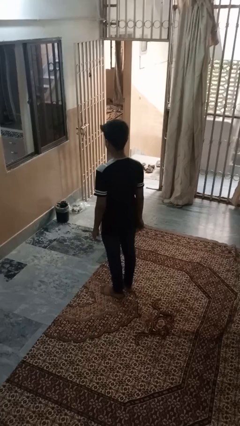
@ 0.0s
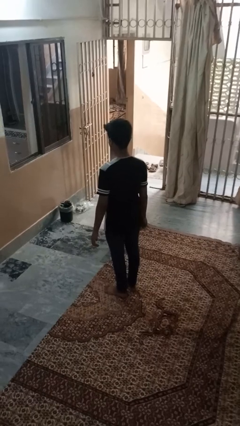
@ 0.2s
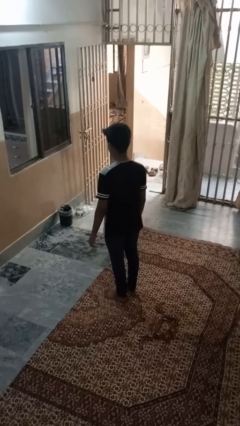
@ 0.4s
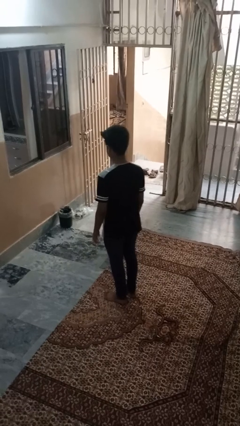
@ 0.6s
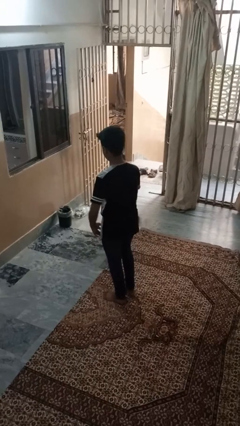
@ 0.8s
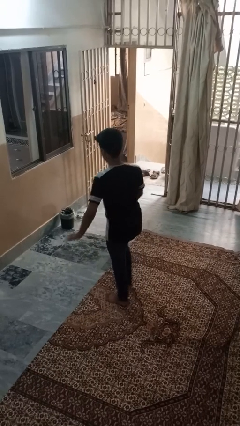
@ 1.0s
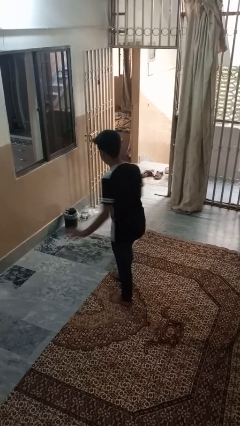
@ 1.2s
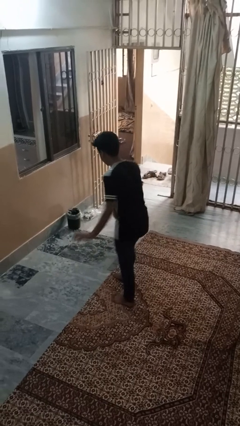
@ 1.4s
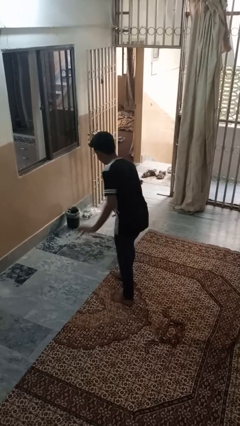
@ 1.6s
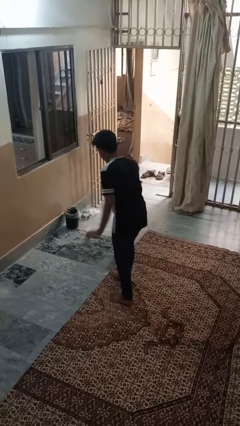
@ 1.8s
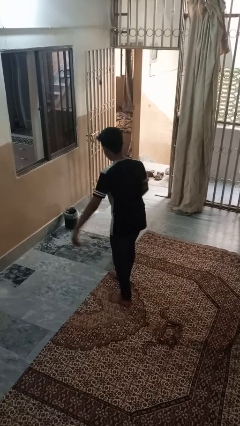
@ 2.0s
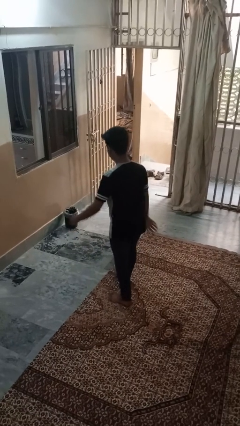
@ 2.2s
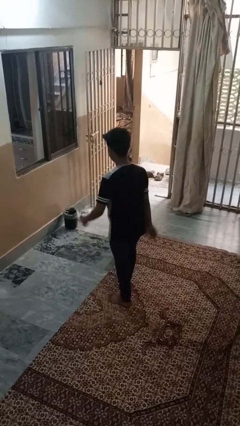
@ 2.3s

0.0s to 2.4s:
person dances in place

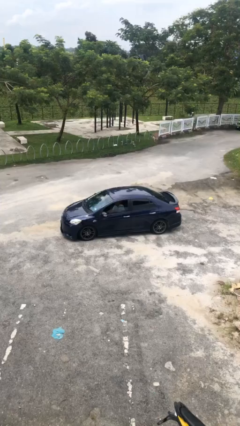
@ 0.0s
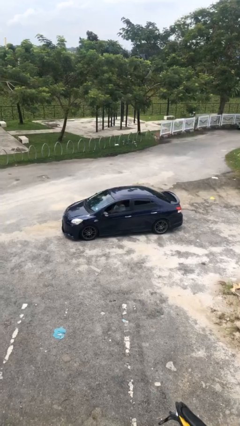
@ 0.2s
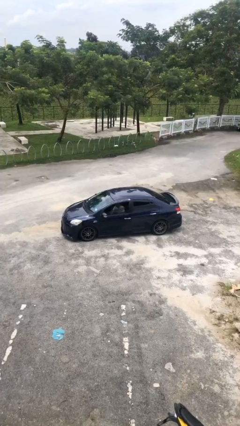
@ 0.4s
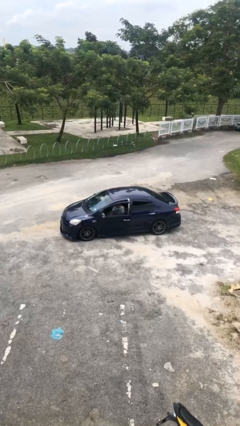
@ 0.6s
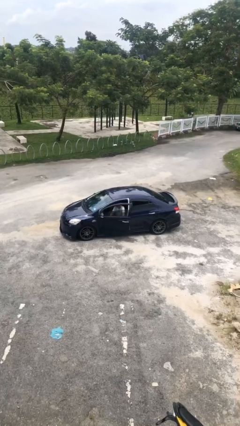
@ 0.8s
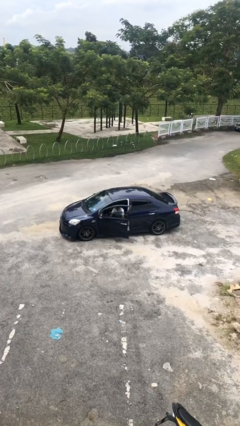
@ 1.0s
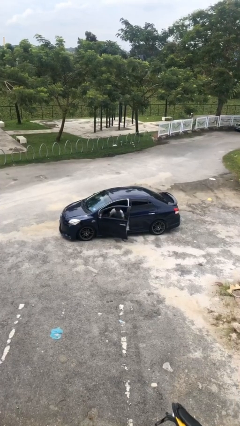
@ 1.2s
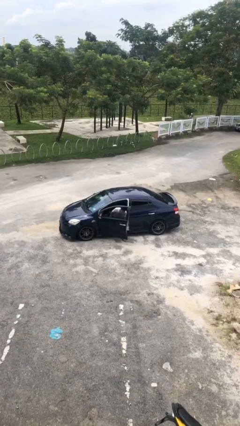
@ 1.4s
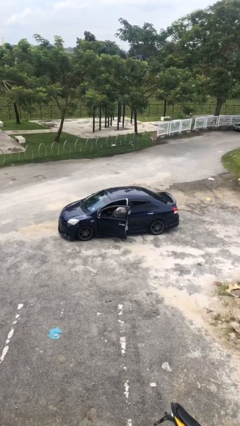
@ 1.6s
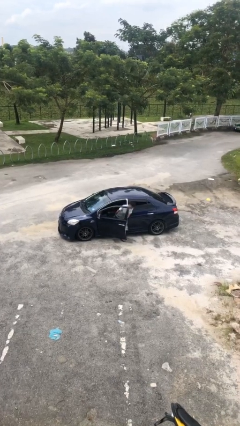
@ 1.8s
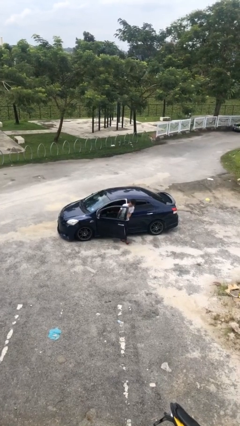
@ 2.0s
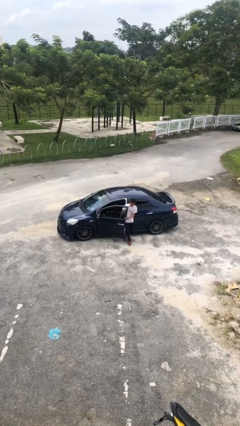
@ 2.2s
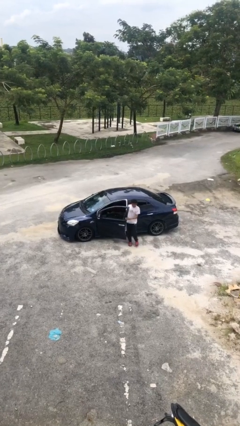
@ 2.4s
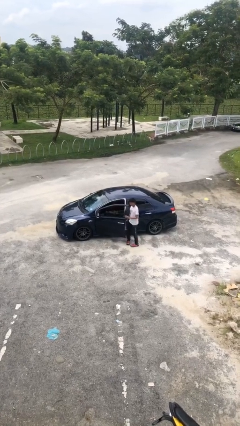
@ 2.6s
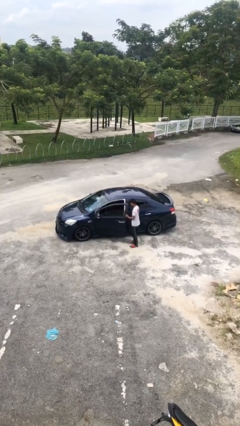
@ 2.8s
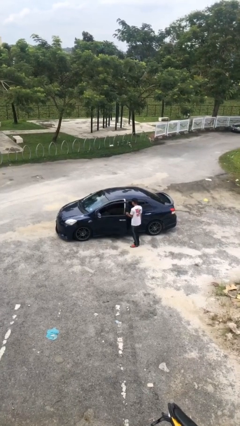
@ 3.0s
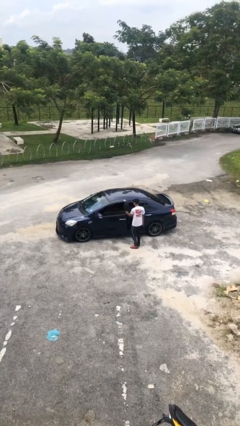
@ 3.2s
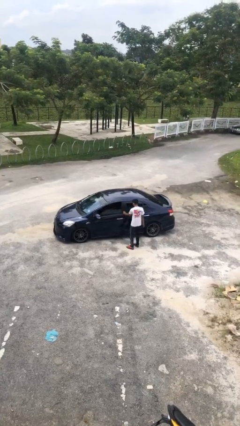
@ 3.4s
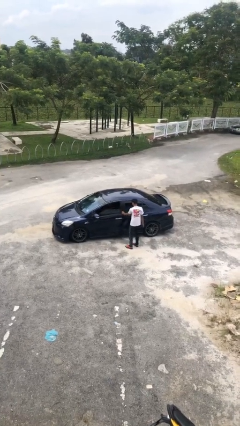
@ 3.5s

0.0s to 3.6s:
car drops off person

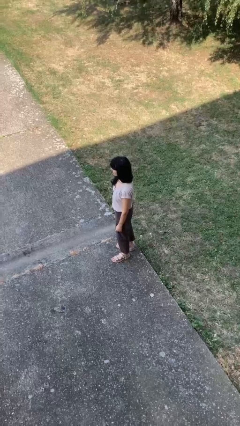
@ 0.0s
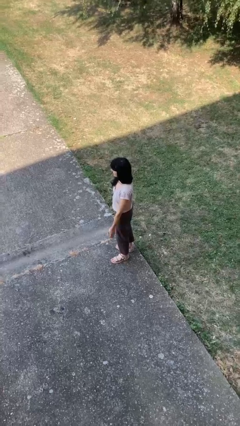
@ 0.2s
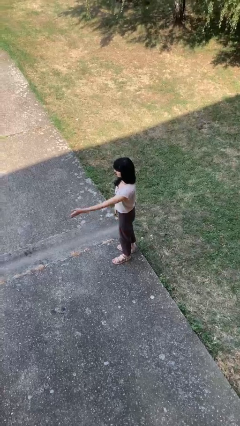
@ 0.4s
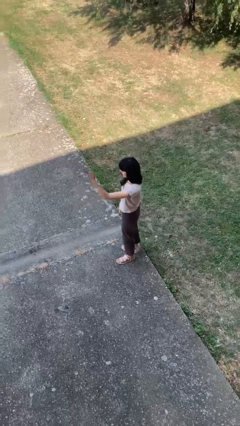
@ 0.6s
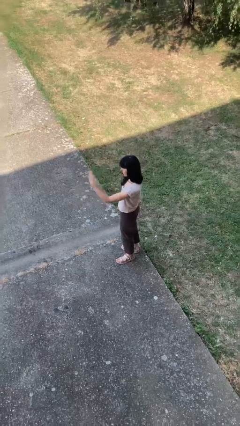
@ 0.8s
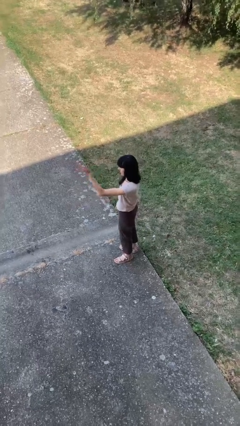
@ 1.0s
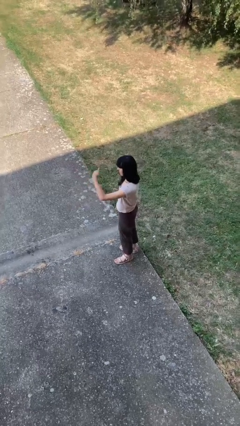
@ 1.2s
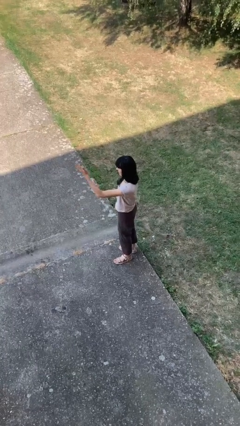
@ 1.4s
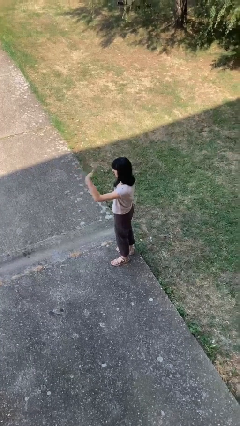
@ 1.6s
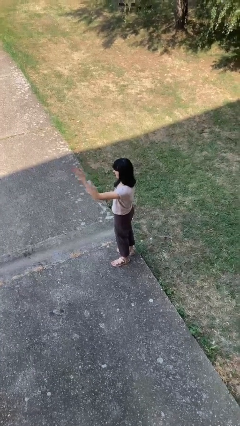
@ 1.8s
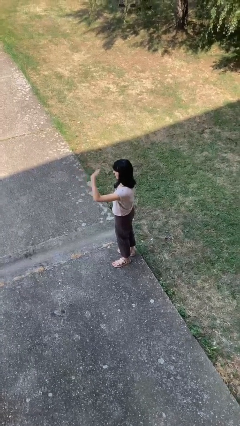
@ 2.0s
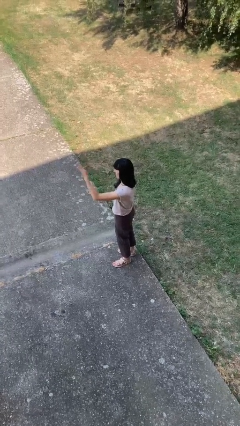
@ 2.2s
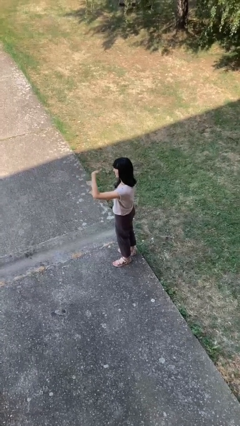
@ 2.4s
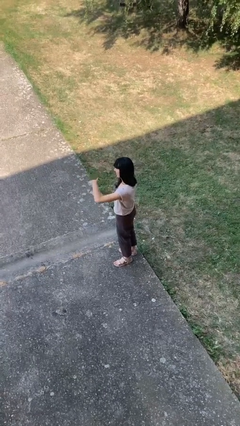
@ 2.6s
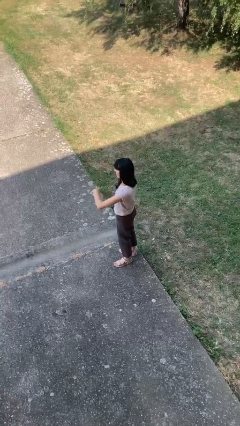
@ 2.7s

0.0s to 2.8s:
person gestures come here

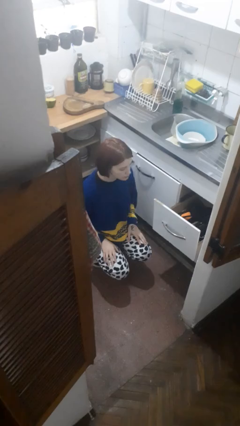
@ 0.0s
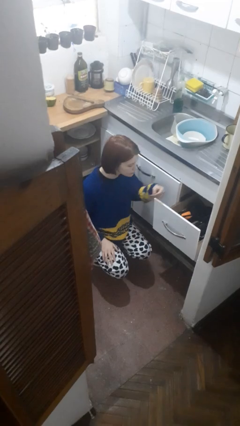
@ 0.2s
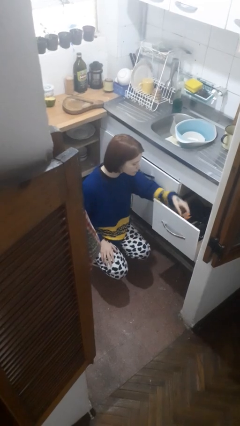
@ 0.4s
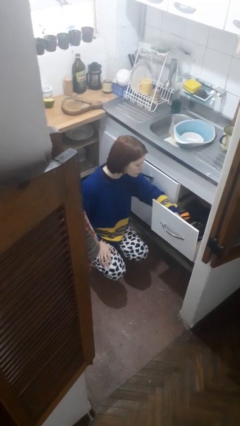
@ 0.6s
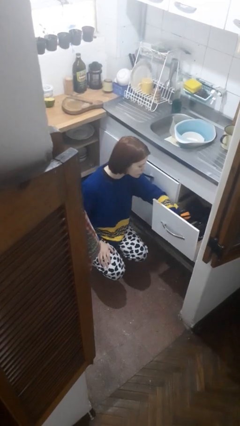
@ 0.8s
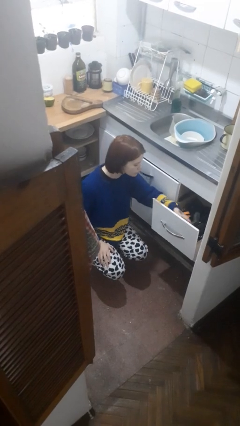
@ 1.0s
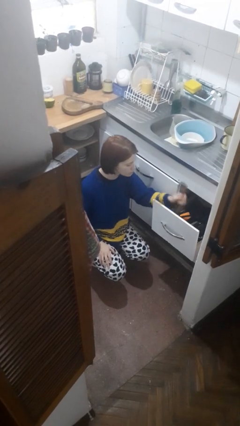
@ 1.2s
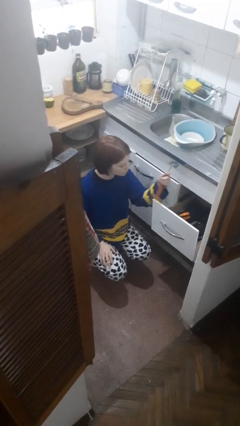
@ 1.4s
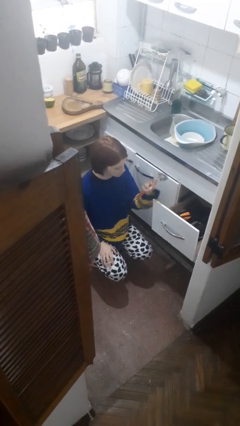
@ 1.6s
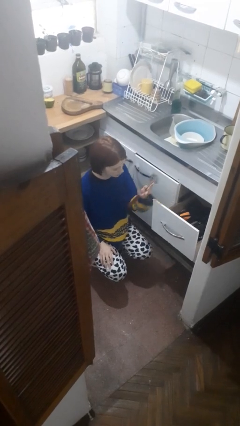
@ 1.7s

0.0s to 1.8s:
person takes object from kitchen drawer

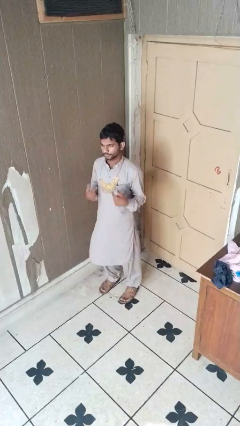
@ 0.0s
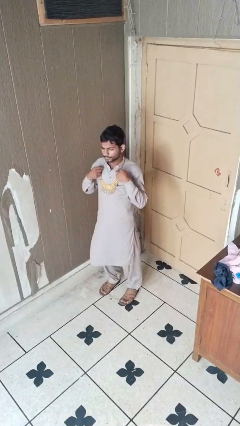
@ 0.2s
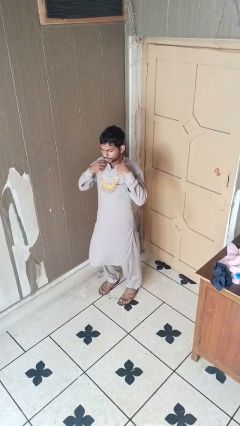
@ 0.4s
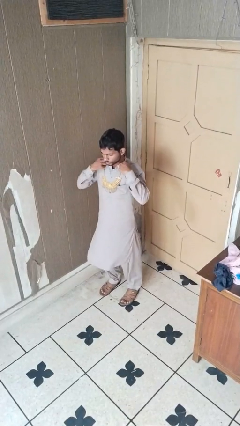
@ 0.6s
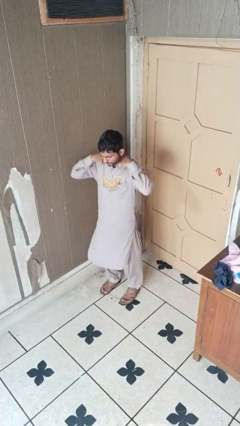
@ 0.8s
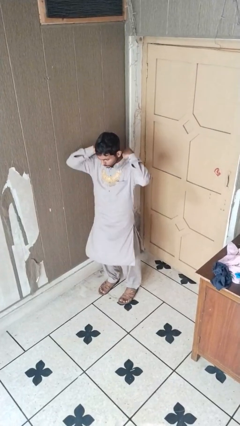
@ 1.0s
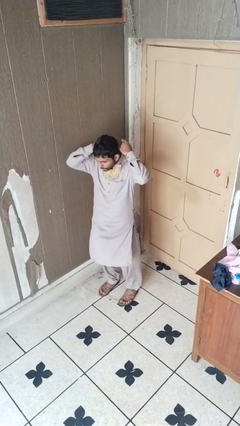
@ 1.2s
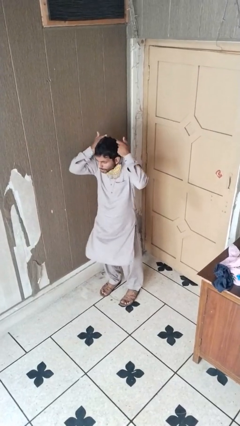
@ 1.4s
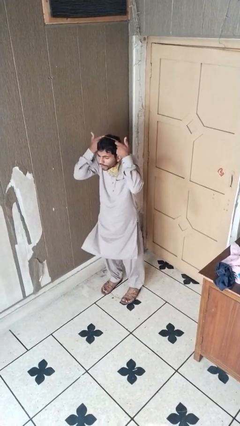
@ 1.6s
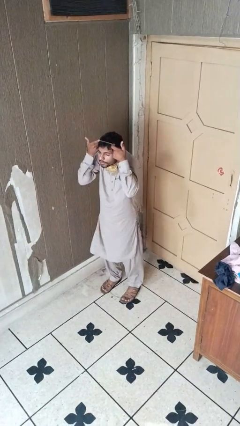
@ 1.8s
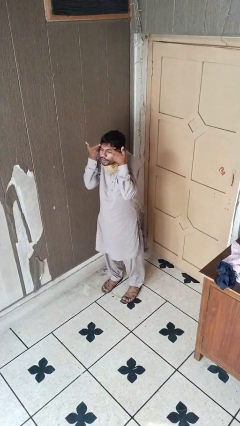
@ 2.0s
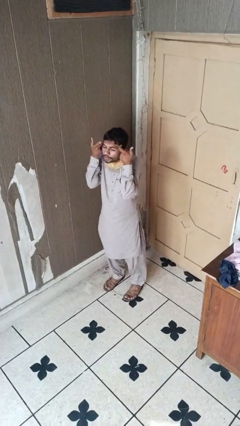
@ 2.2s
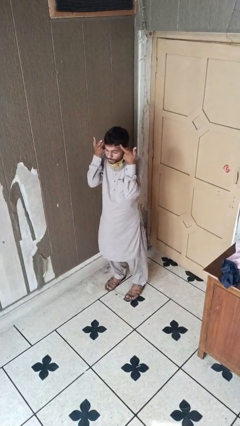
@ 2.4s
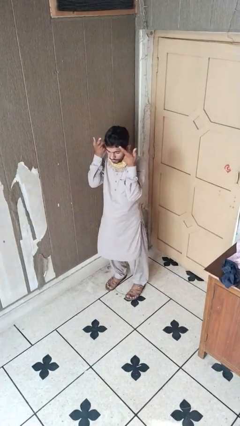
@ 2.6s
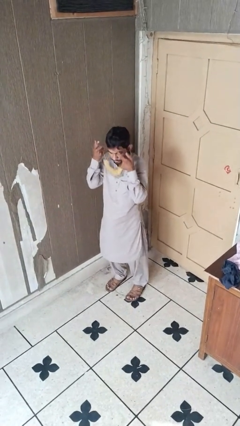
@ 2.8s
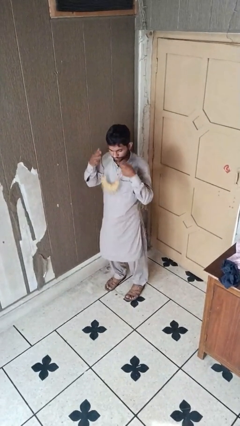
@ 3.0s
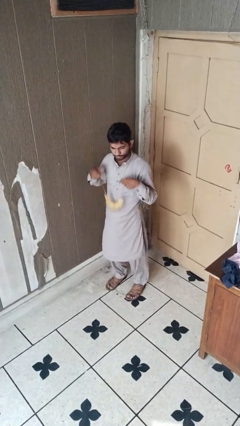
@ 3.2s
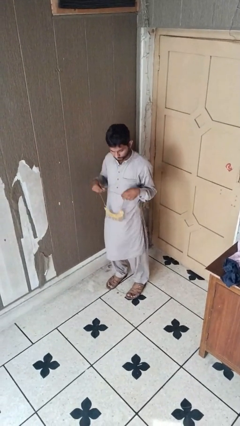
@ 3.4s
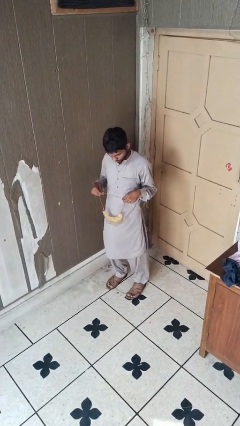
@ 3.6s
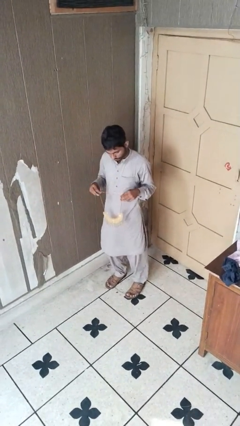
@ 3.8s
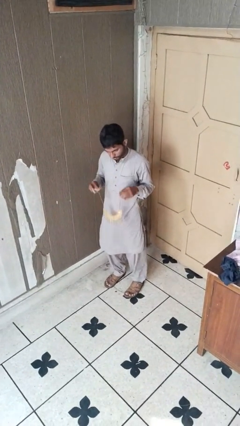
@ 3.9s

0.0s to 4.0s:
person takes off necklace

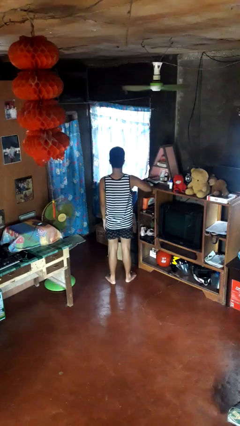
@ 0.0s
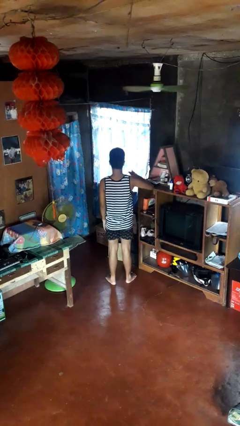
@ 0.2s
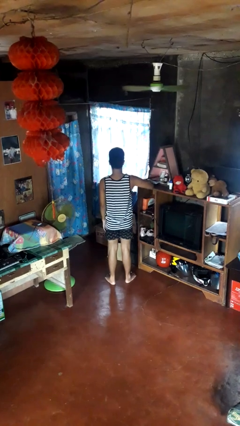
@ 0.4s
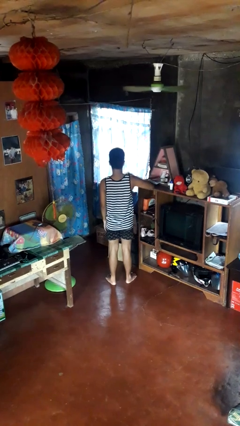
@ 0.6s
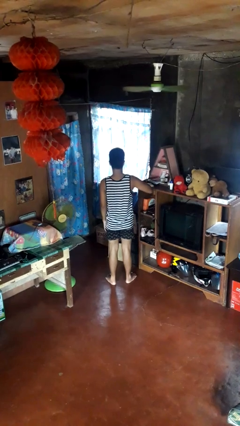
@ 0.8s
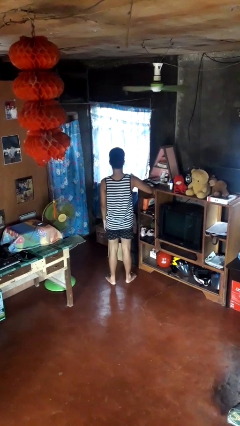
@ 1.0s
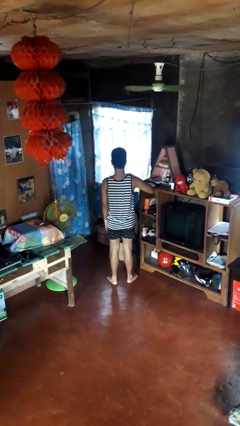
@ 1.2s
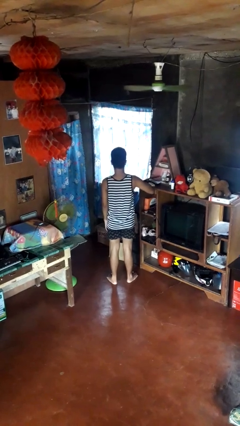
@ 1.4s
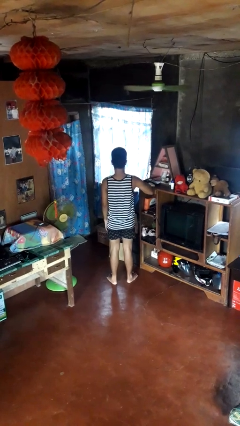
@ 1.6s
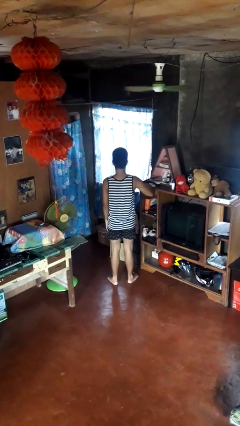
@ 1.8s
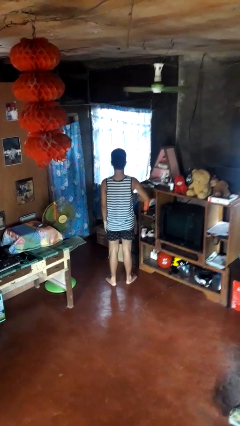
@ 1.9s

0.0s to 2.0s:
person drums on chest

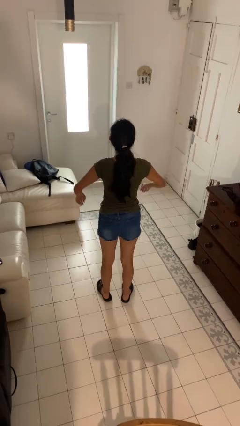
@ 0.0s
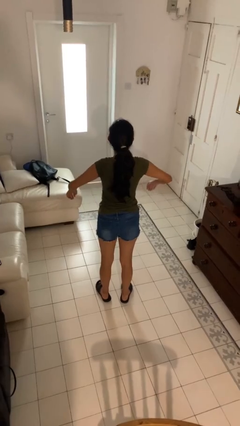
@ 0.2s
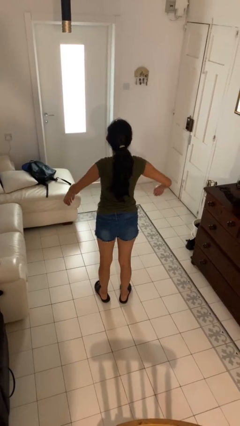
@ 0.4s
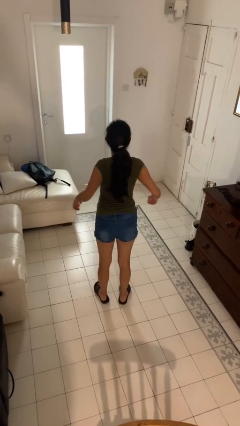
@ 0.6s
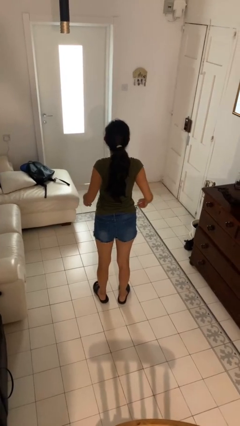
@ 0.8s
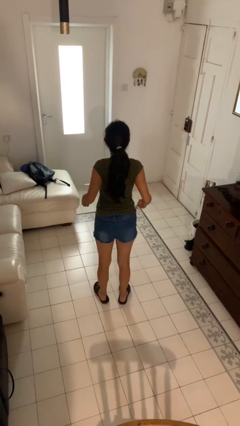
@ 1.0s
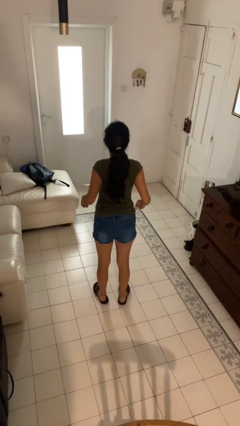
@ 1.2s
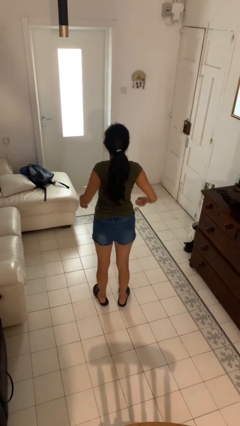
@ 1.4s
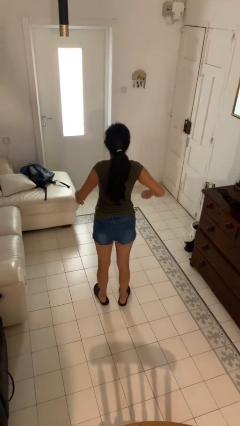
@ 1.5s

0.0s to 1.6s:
person stretches back
